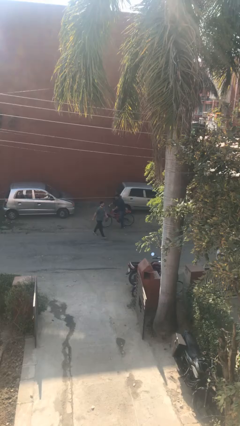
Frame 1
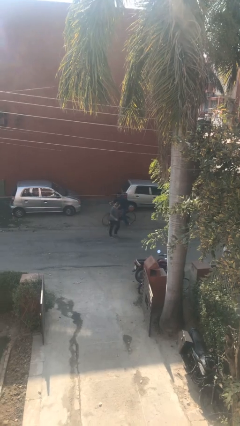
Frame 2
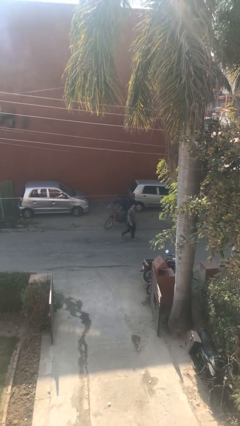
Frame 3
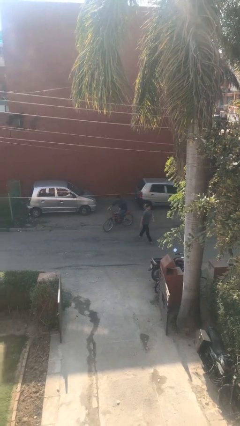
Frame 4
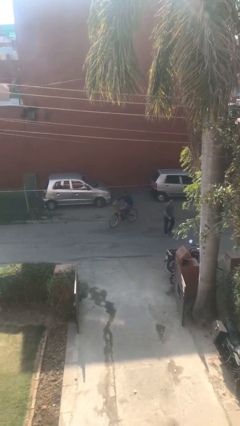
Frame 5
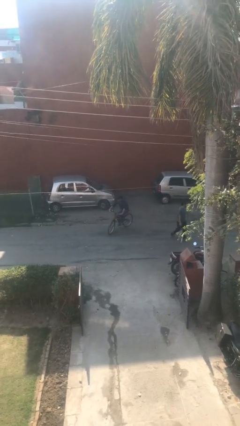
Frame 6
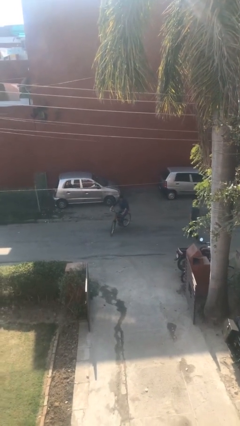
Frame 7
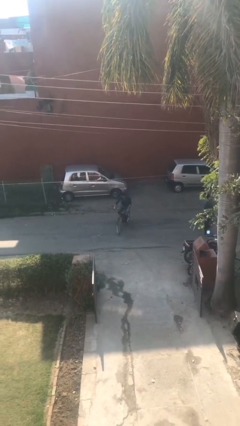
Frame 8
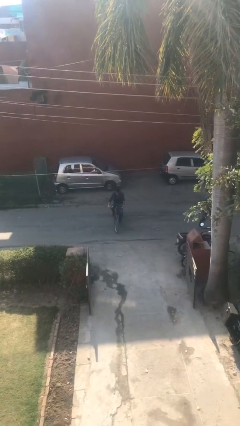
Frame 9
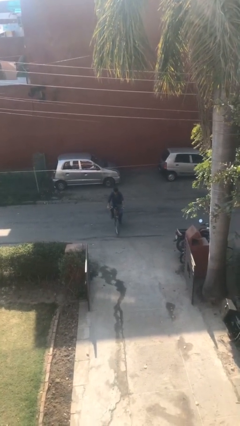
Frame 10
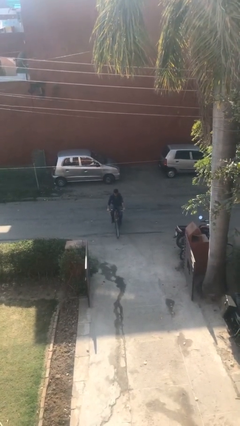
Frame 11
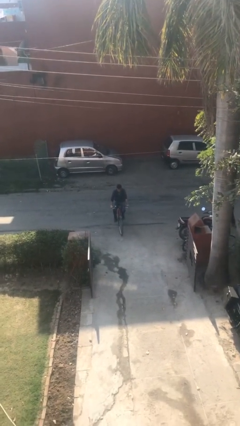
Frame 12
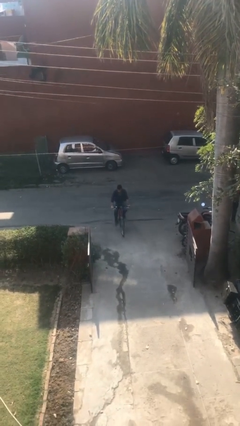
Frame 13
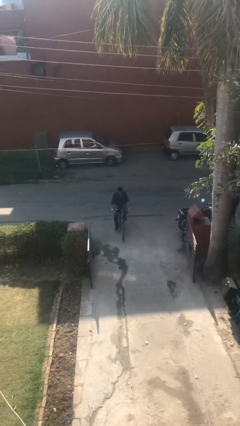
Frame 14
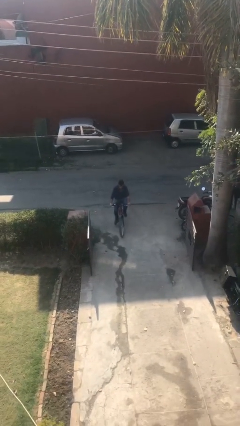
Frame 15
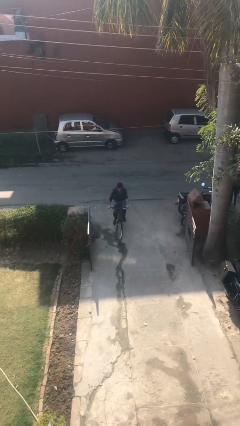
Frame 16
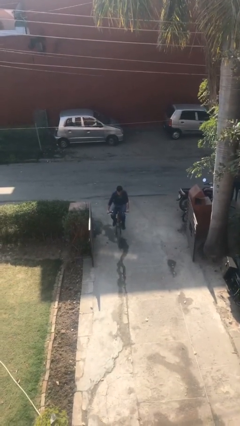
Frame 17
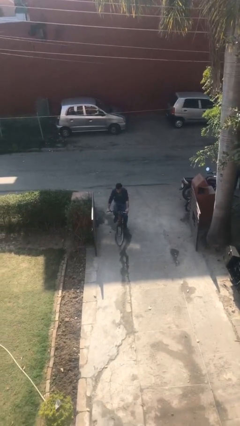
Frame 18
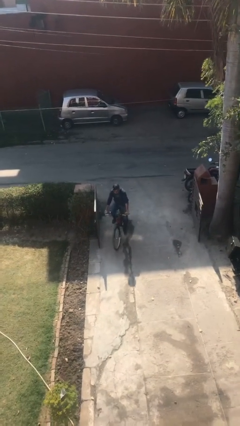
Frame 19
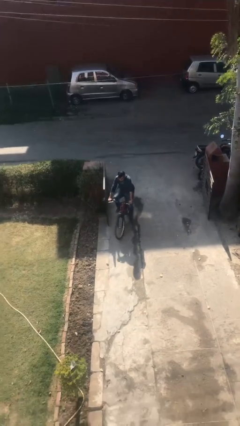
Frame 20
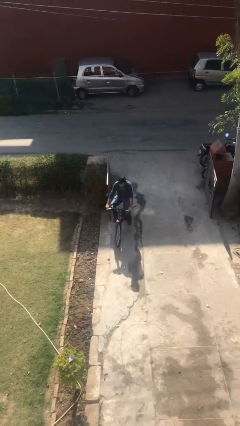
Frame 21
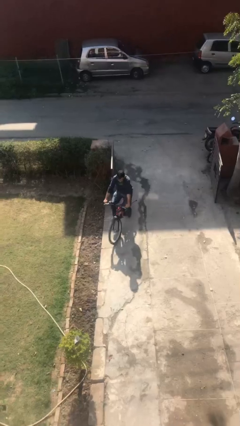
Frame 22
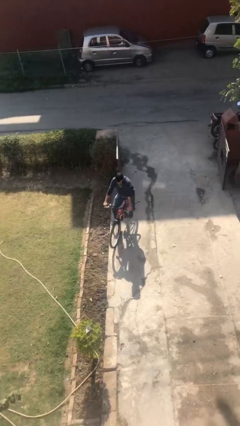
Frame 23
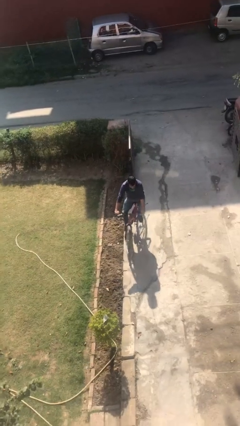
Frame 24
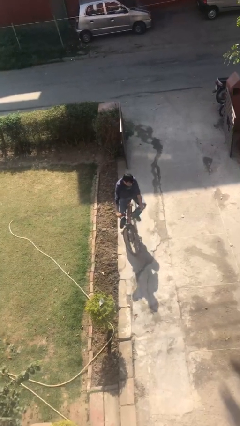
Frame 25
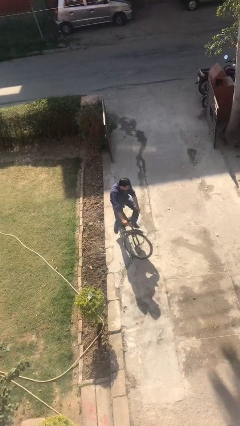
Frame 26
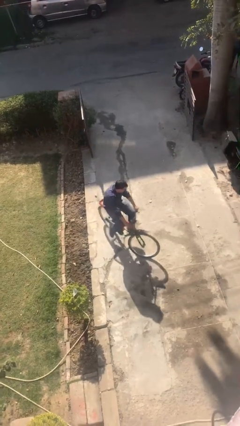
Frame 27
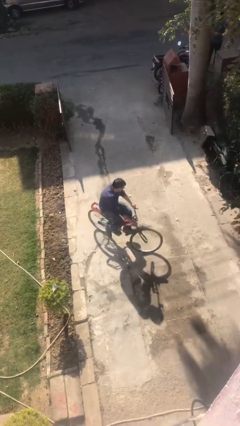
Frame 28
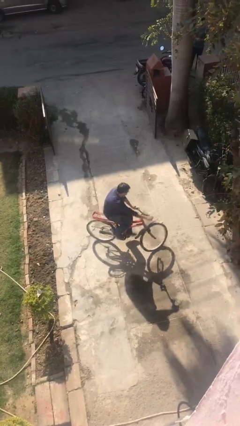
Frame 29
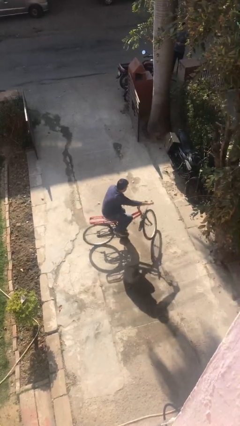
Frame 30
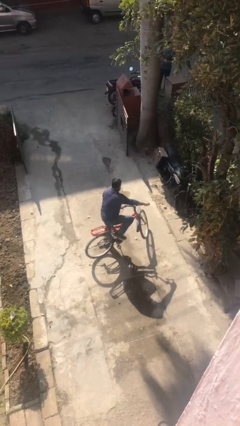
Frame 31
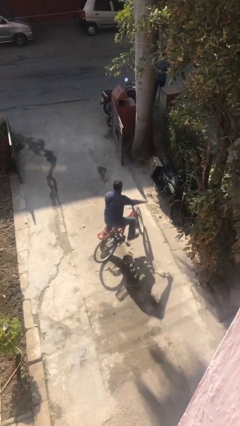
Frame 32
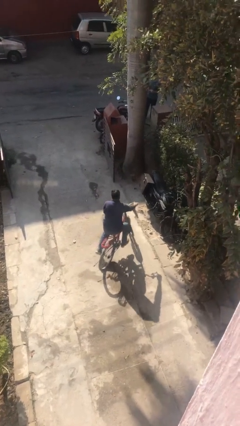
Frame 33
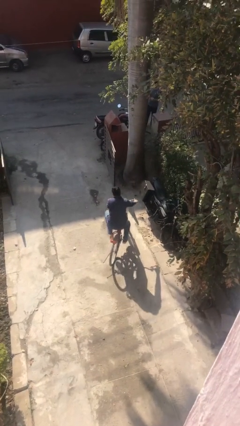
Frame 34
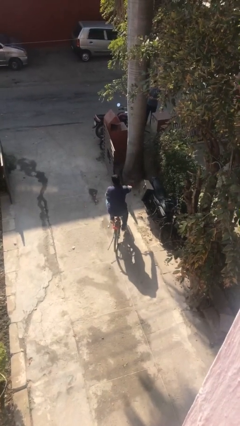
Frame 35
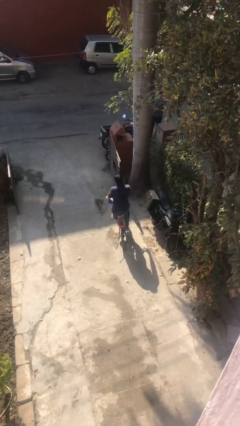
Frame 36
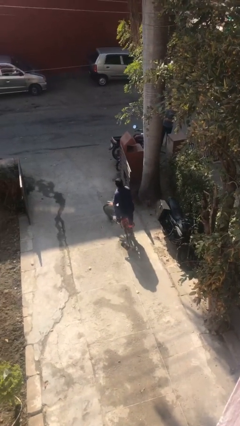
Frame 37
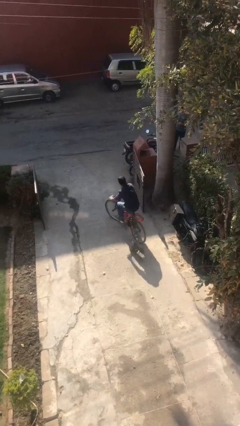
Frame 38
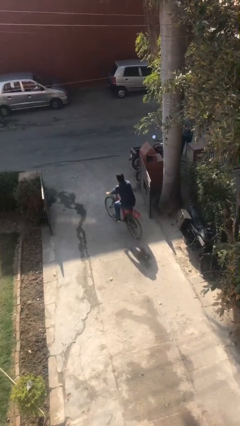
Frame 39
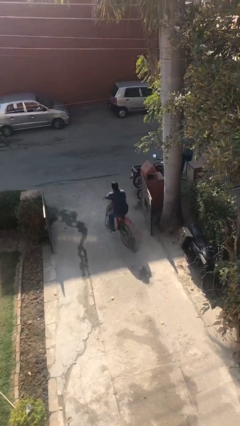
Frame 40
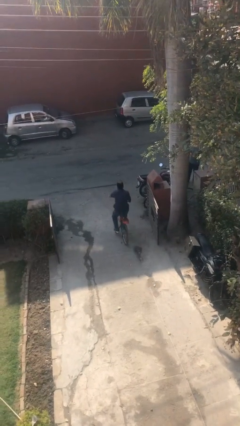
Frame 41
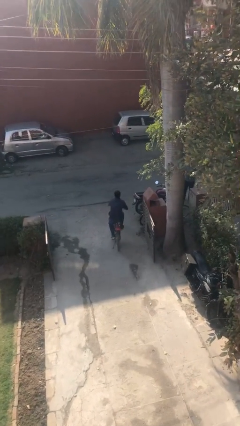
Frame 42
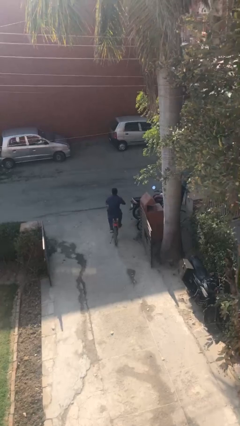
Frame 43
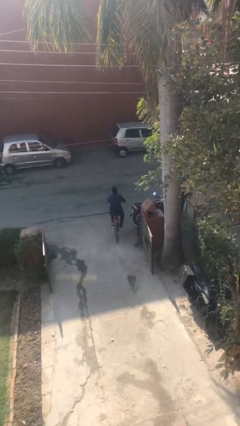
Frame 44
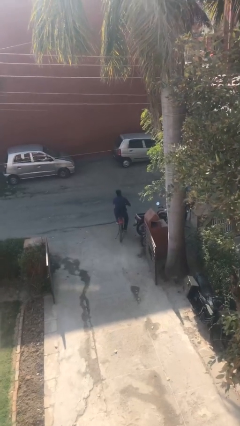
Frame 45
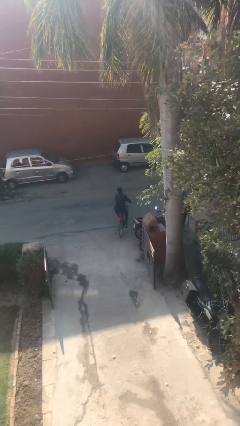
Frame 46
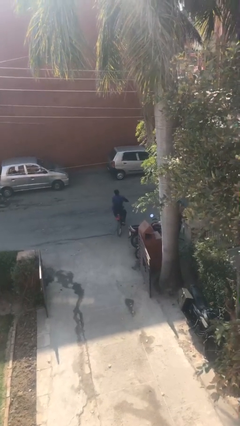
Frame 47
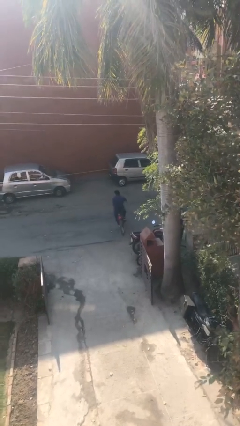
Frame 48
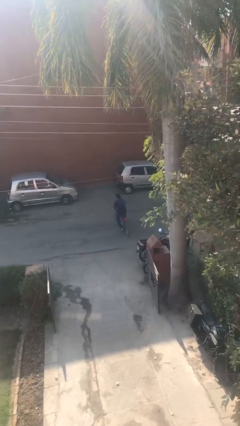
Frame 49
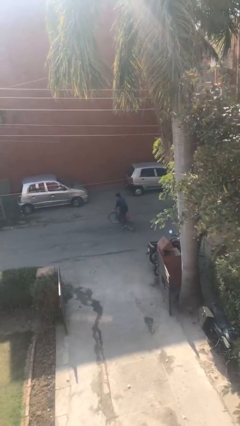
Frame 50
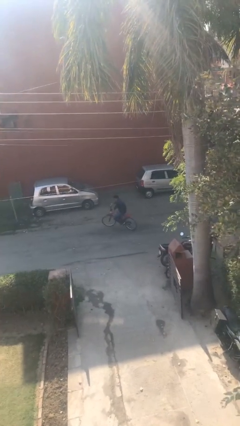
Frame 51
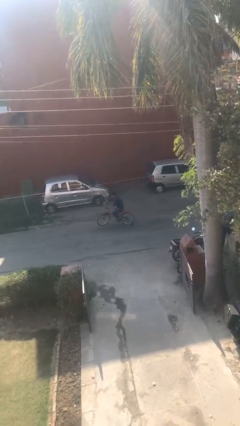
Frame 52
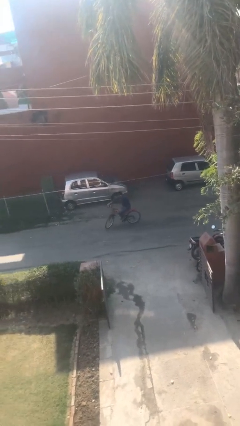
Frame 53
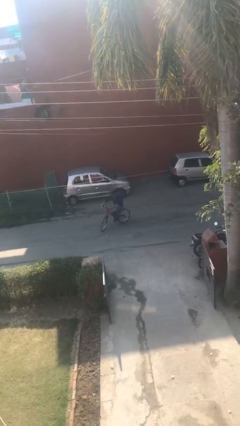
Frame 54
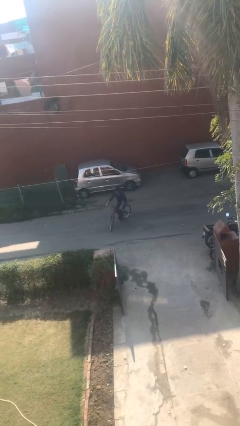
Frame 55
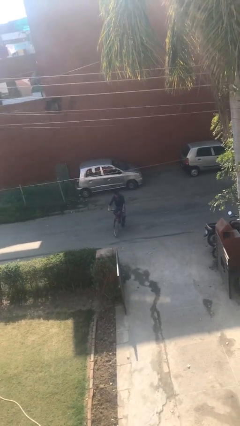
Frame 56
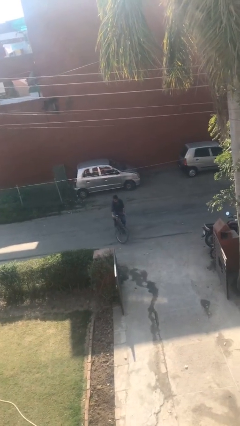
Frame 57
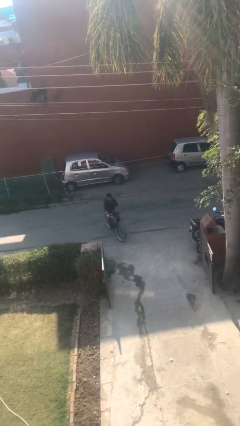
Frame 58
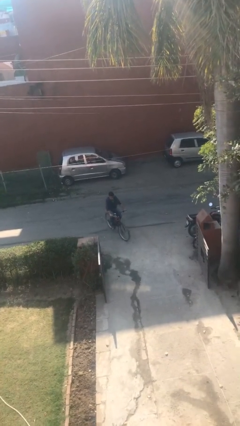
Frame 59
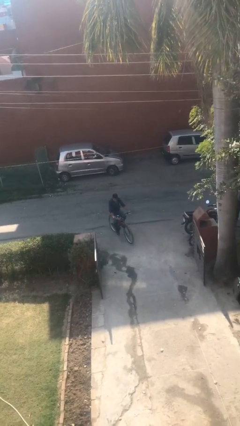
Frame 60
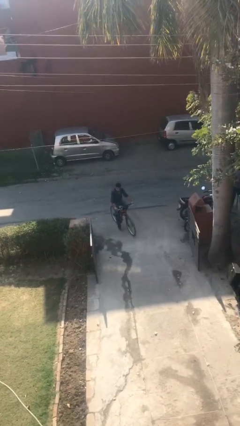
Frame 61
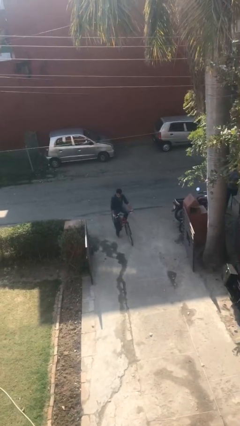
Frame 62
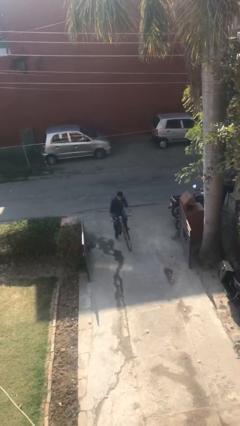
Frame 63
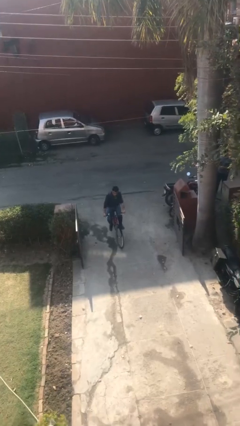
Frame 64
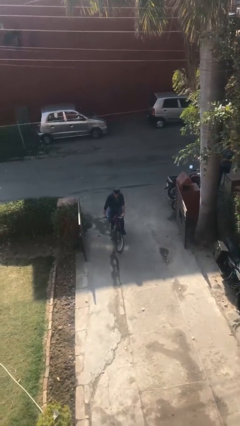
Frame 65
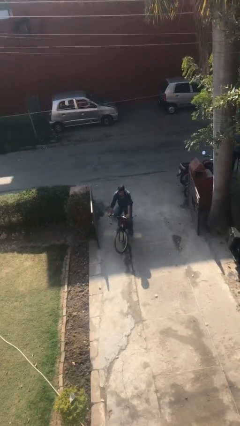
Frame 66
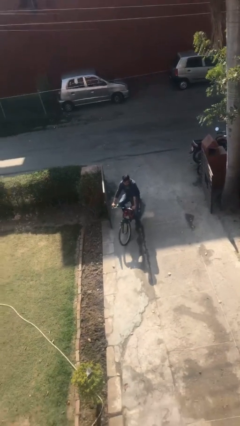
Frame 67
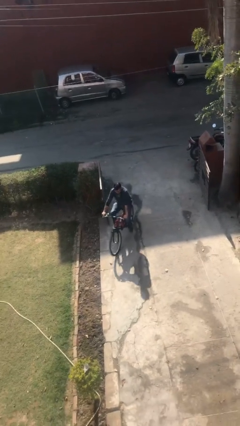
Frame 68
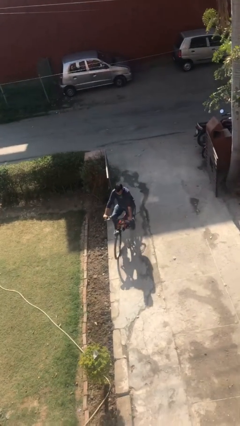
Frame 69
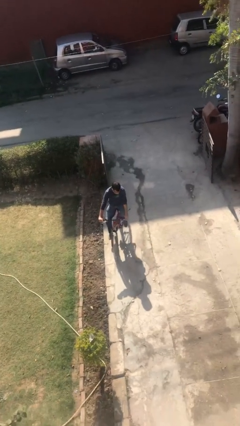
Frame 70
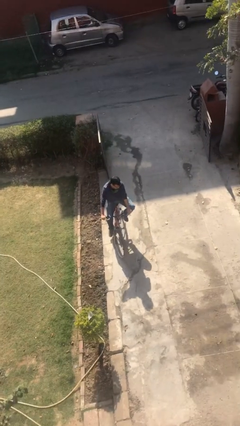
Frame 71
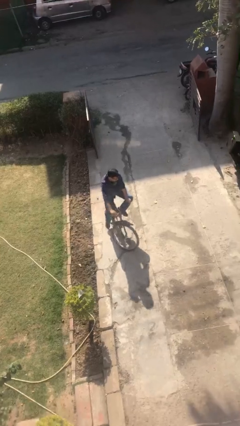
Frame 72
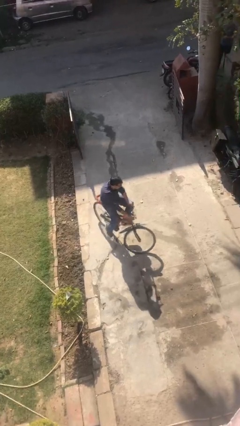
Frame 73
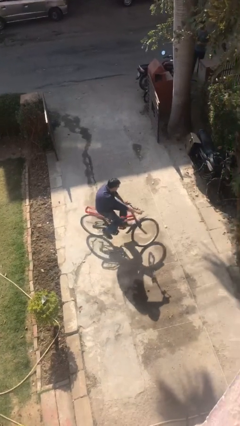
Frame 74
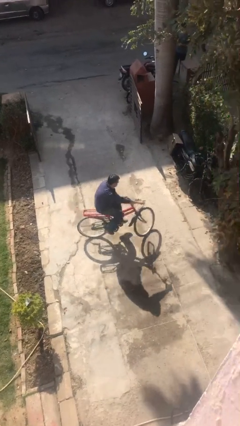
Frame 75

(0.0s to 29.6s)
person rides bicycle

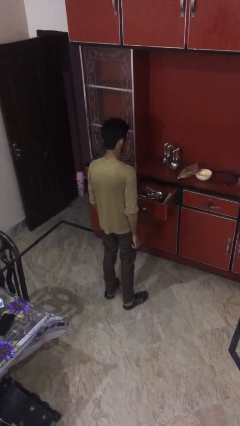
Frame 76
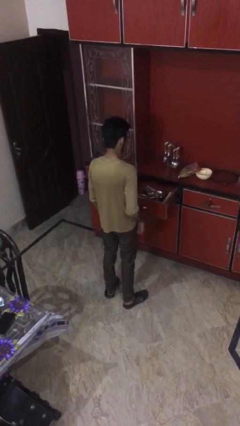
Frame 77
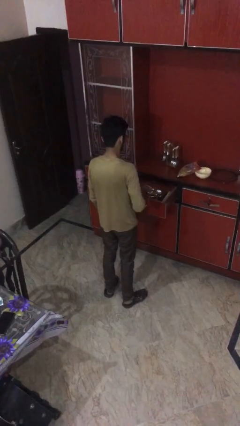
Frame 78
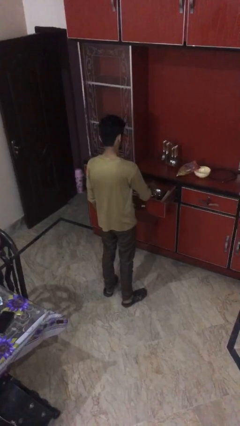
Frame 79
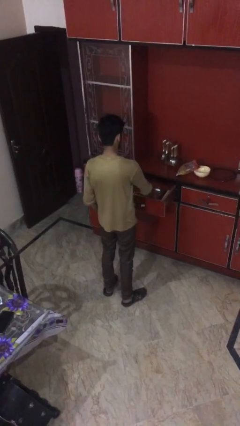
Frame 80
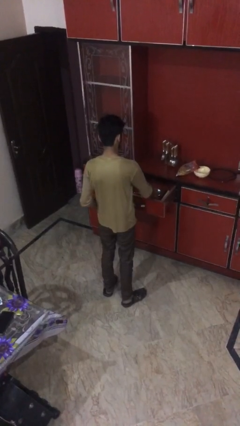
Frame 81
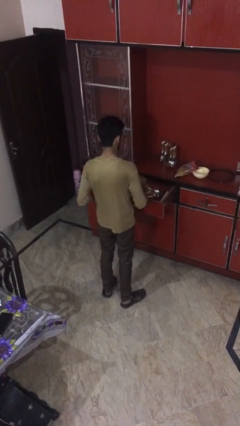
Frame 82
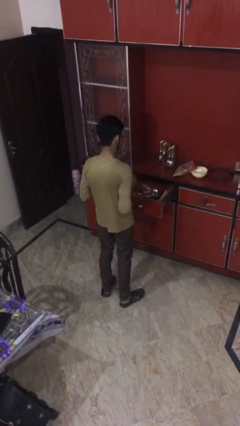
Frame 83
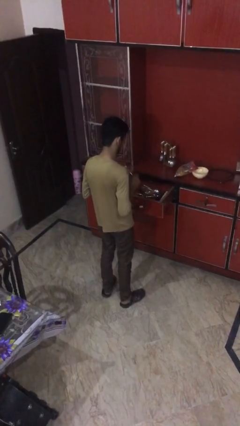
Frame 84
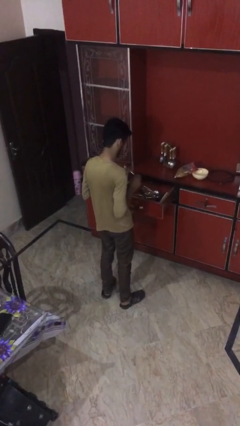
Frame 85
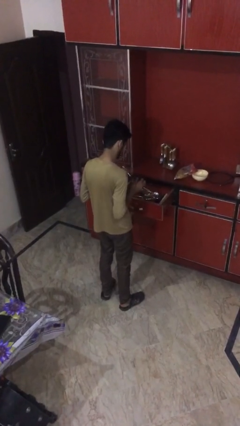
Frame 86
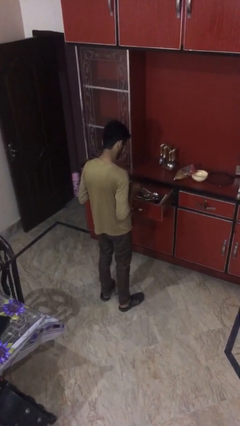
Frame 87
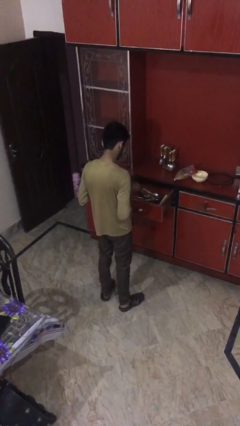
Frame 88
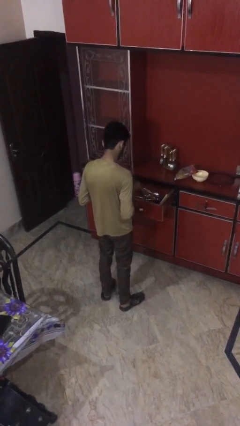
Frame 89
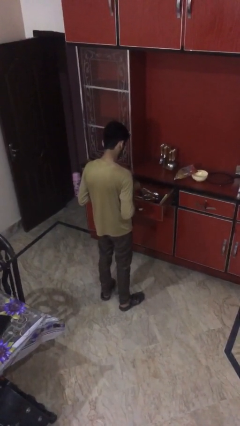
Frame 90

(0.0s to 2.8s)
person takes object from kitchen drawer

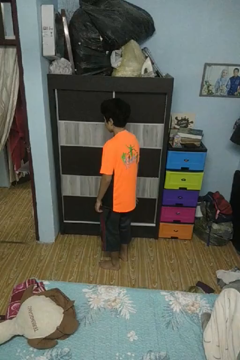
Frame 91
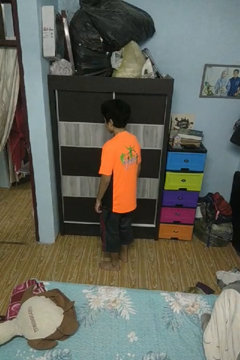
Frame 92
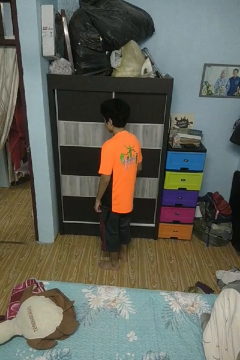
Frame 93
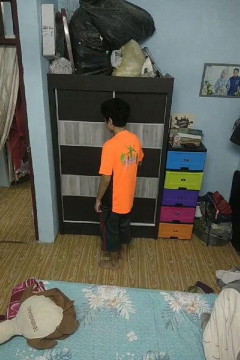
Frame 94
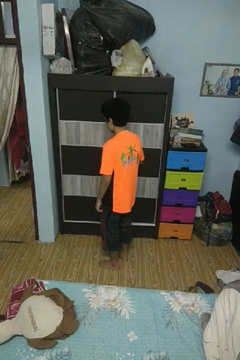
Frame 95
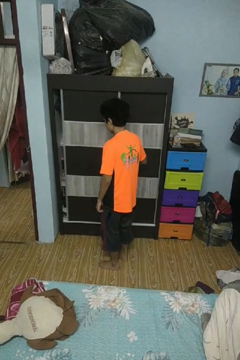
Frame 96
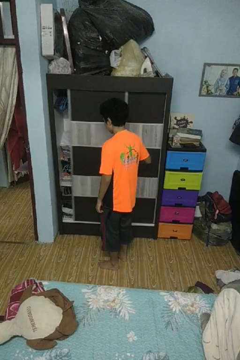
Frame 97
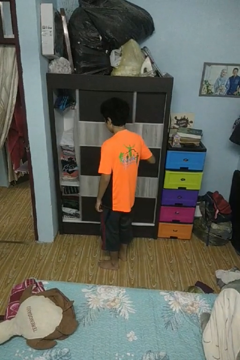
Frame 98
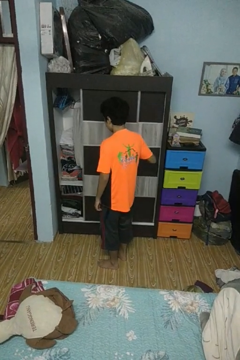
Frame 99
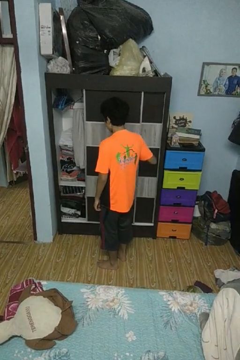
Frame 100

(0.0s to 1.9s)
person opens closet door
